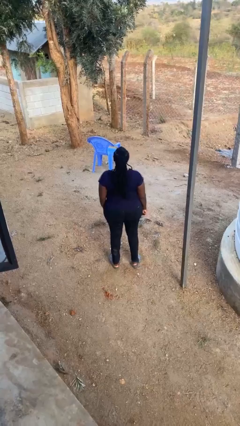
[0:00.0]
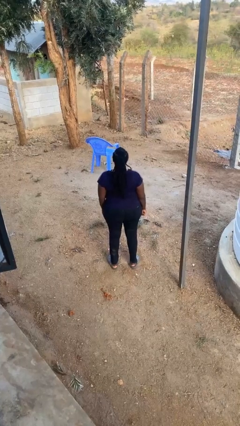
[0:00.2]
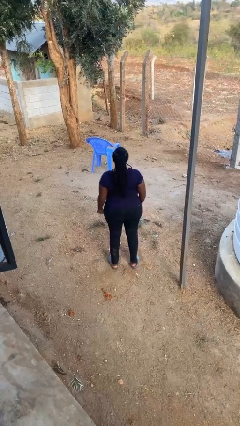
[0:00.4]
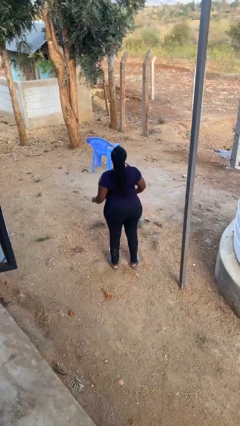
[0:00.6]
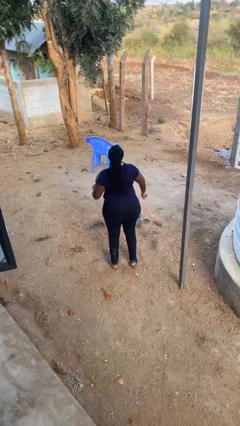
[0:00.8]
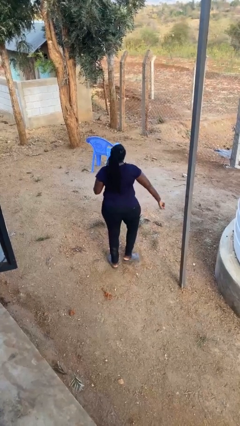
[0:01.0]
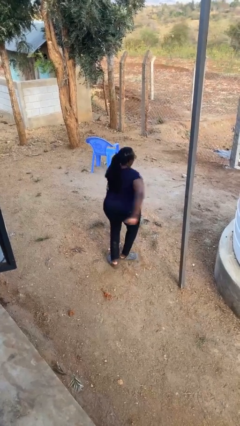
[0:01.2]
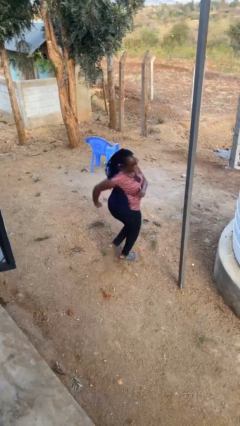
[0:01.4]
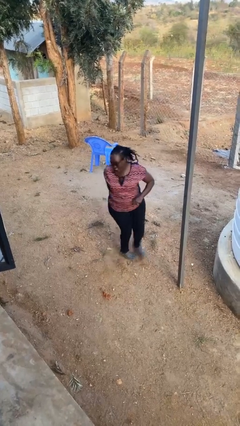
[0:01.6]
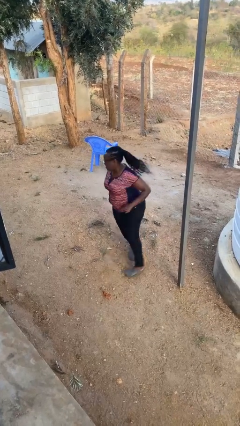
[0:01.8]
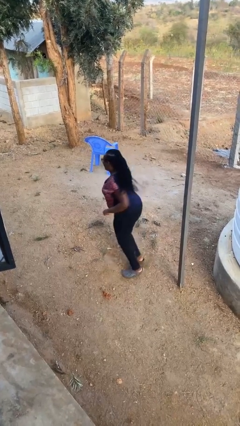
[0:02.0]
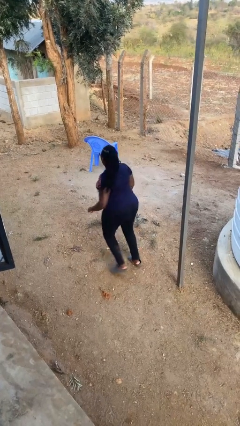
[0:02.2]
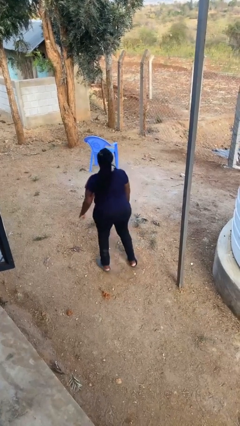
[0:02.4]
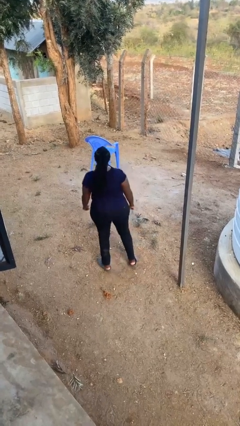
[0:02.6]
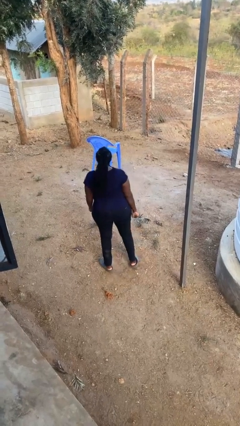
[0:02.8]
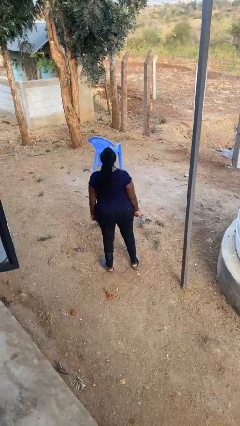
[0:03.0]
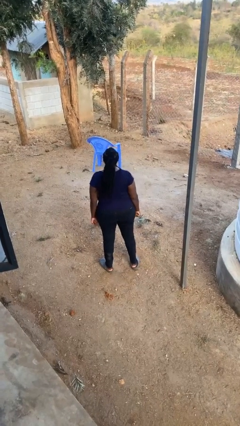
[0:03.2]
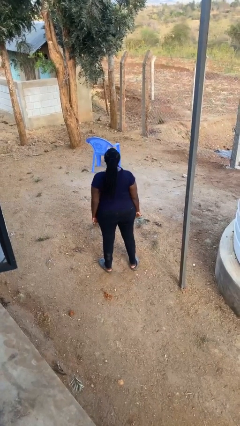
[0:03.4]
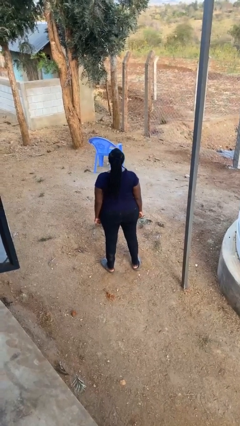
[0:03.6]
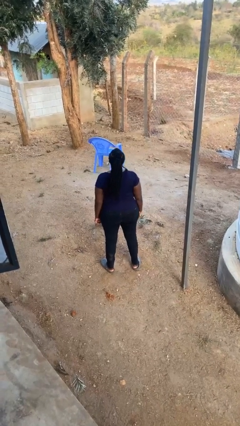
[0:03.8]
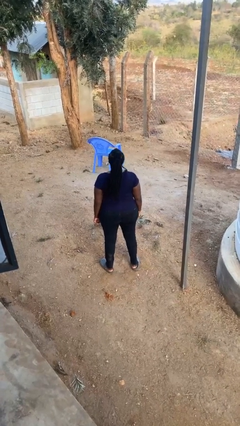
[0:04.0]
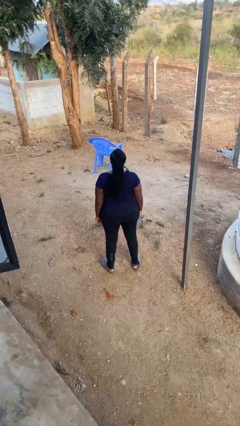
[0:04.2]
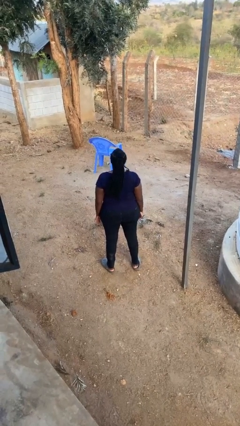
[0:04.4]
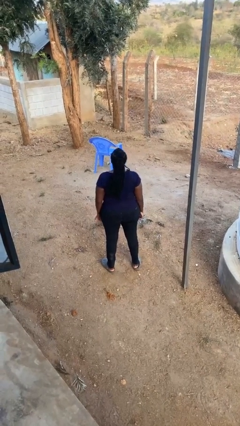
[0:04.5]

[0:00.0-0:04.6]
person twirls

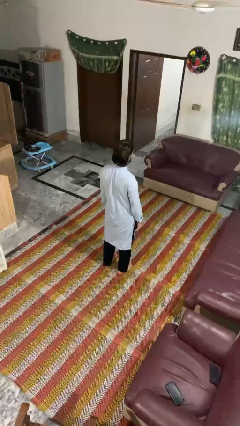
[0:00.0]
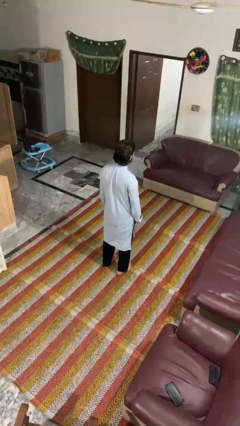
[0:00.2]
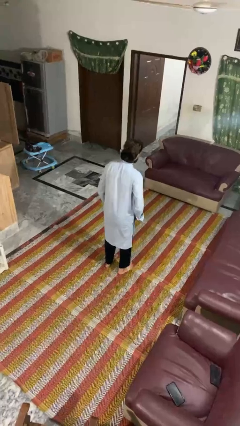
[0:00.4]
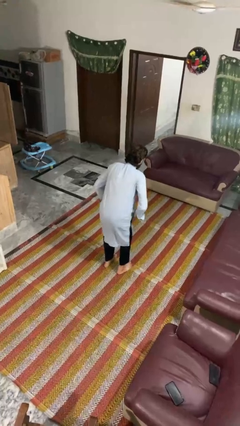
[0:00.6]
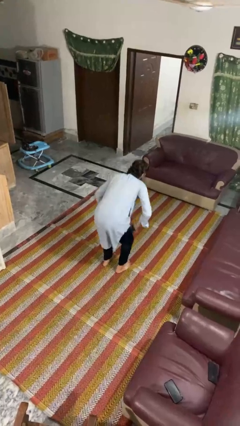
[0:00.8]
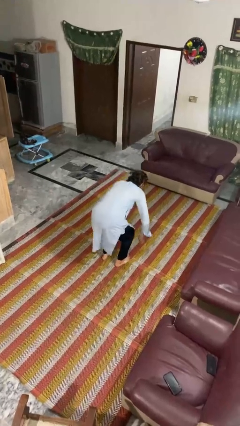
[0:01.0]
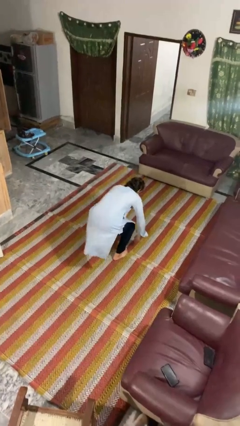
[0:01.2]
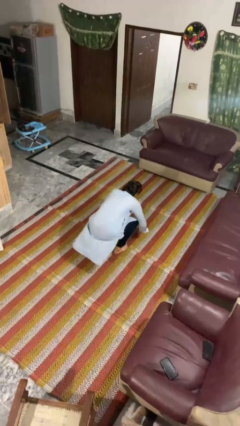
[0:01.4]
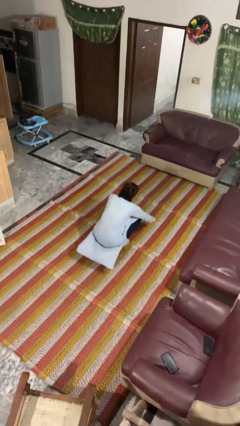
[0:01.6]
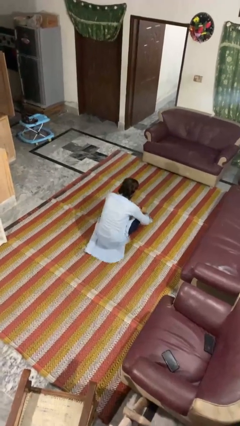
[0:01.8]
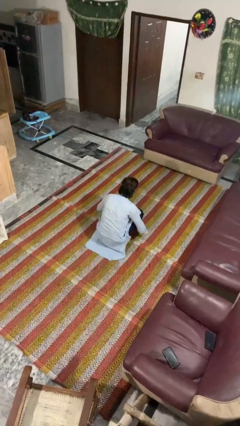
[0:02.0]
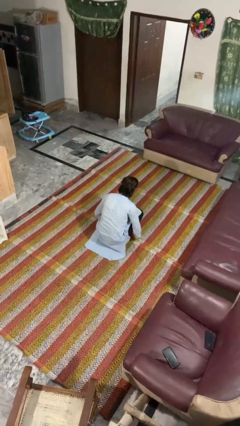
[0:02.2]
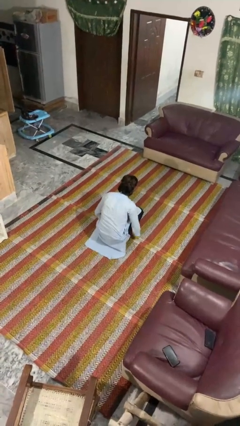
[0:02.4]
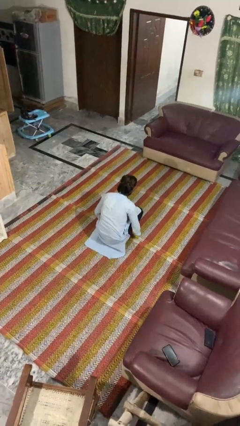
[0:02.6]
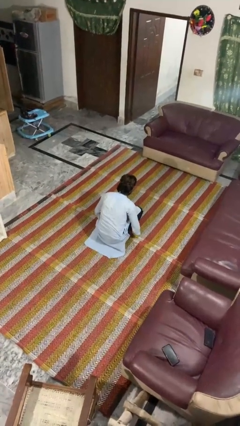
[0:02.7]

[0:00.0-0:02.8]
person squats

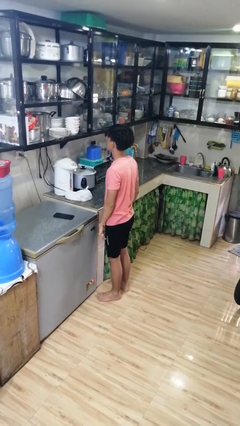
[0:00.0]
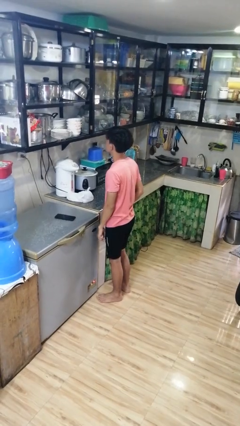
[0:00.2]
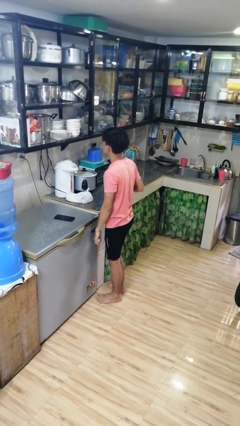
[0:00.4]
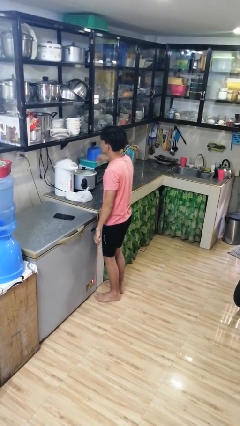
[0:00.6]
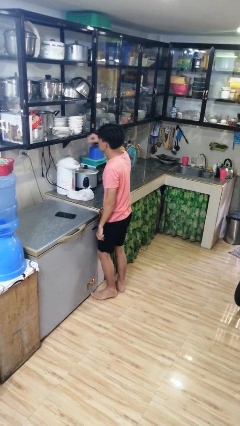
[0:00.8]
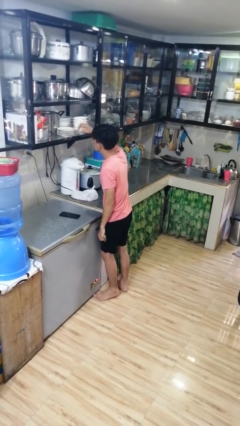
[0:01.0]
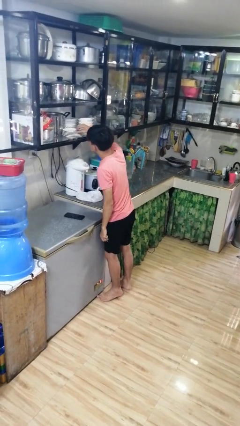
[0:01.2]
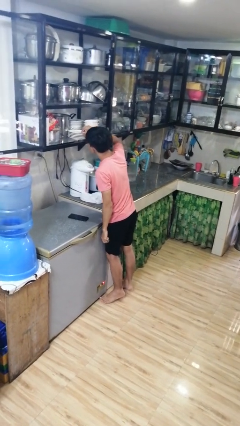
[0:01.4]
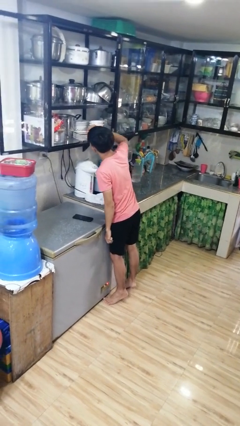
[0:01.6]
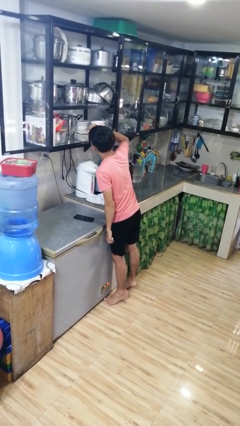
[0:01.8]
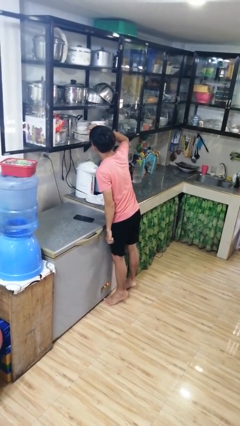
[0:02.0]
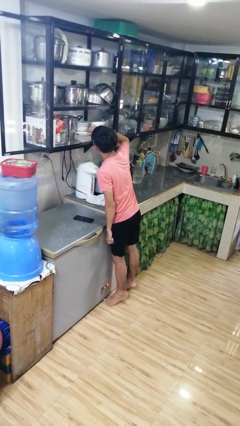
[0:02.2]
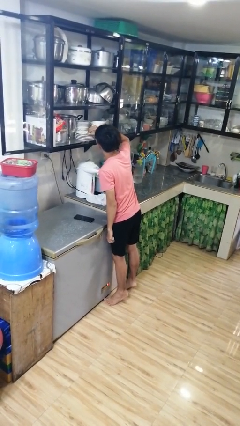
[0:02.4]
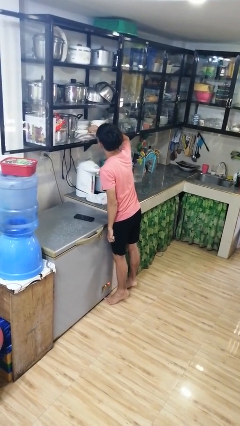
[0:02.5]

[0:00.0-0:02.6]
person takes off backpack

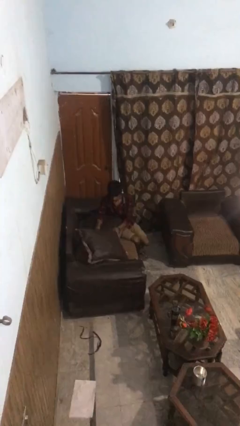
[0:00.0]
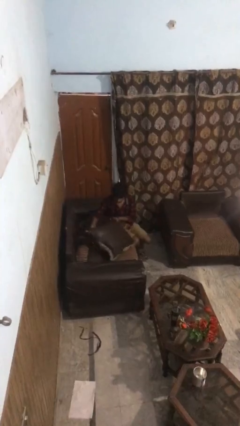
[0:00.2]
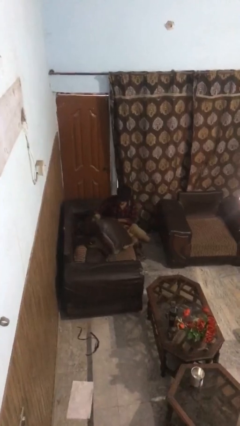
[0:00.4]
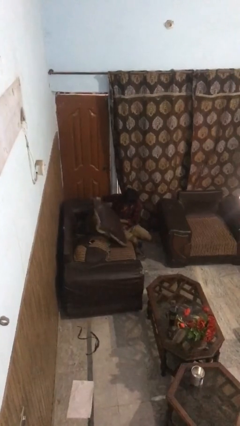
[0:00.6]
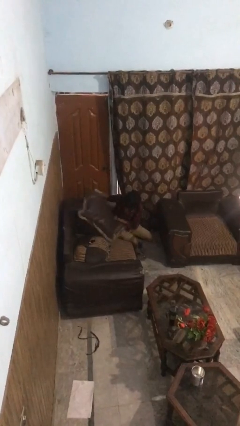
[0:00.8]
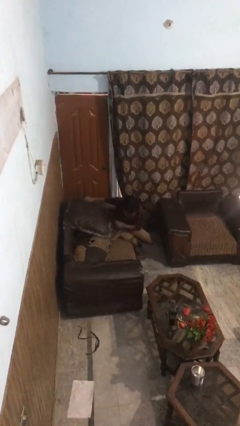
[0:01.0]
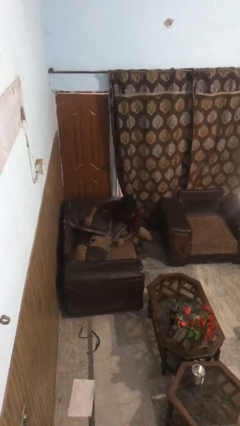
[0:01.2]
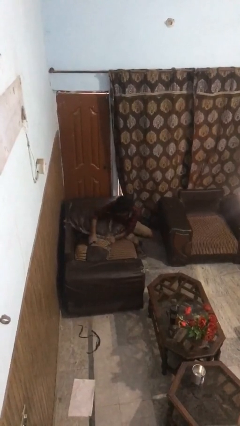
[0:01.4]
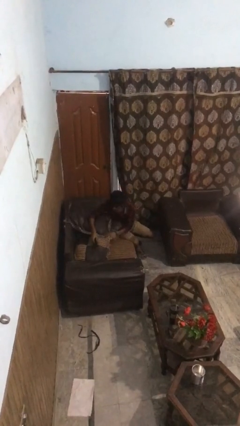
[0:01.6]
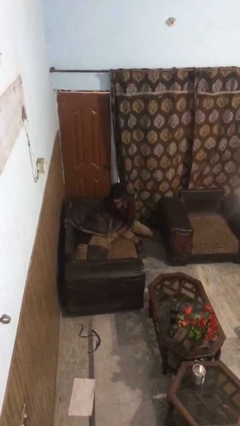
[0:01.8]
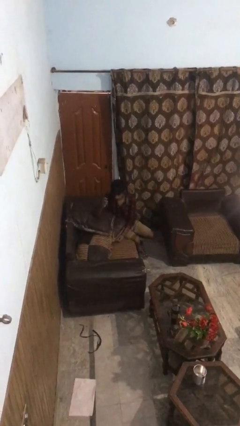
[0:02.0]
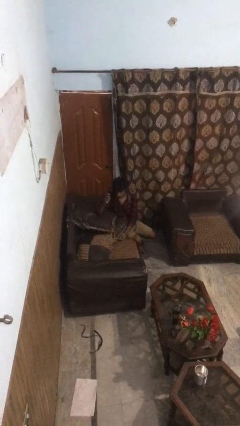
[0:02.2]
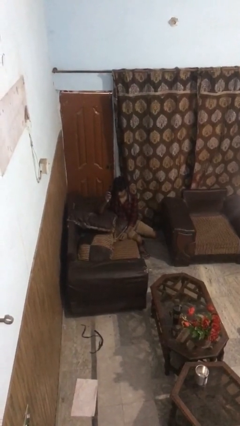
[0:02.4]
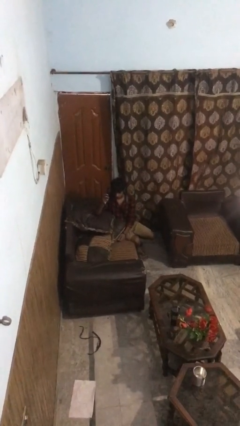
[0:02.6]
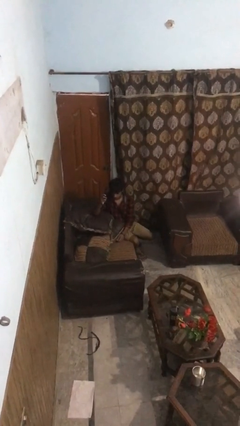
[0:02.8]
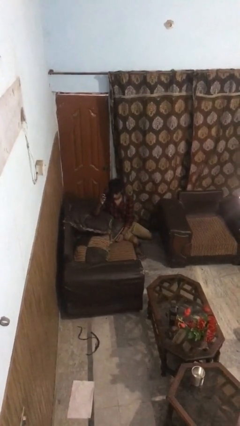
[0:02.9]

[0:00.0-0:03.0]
person searches in couch

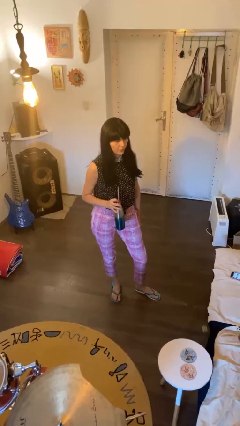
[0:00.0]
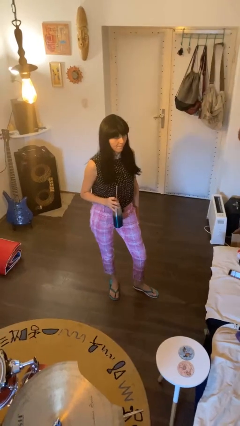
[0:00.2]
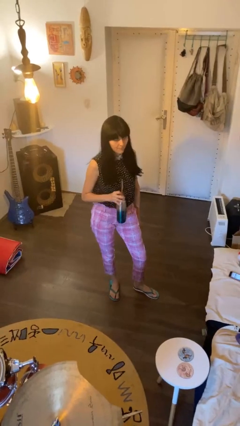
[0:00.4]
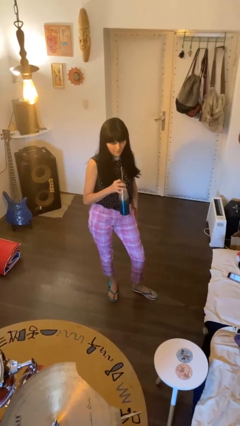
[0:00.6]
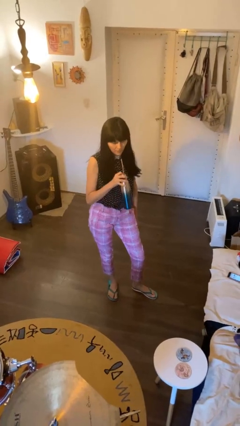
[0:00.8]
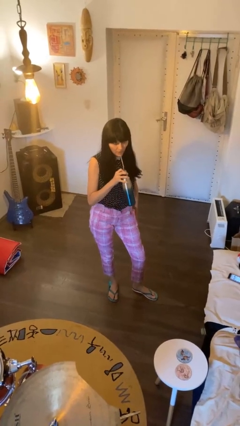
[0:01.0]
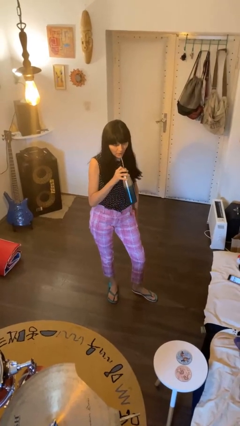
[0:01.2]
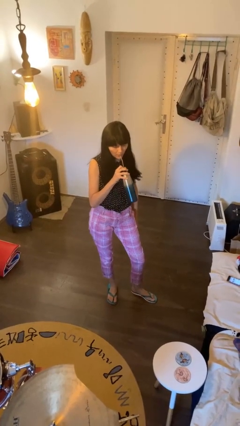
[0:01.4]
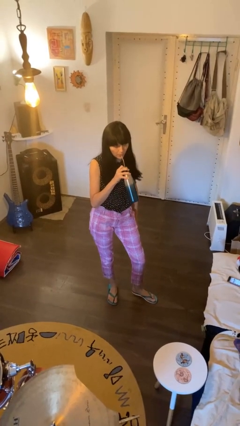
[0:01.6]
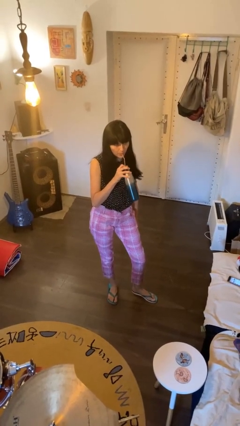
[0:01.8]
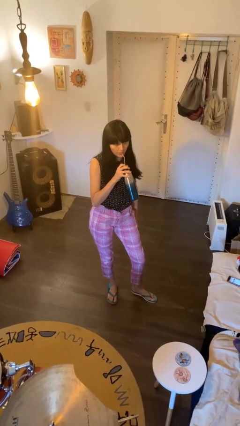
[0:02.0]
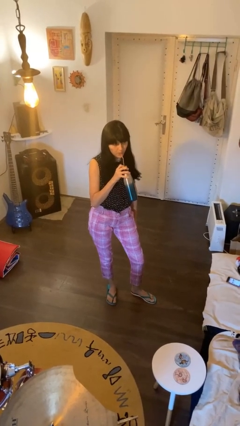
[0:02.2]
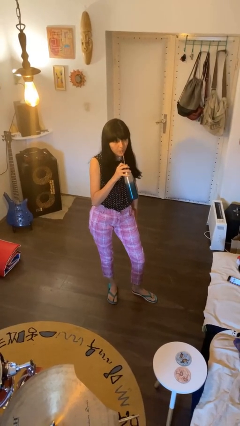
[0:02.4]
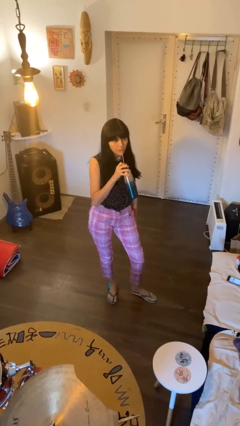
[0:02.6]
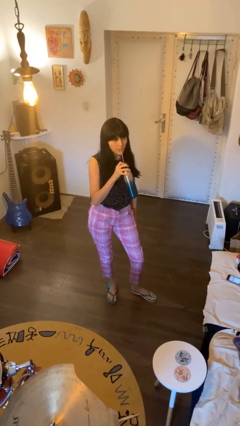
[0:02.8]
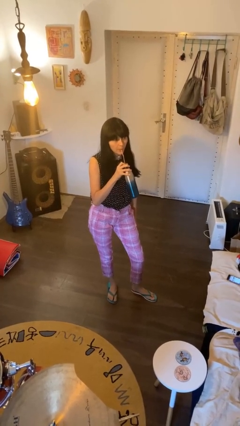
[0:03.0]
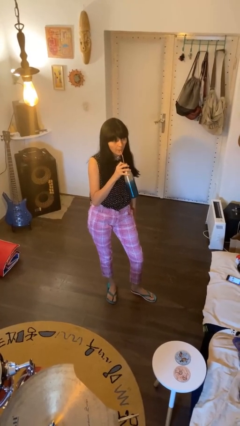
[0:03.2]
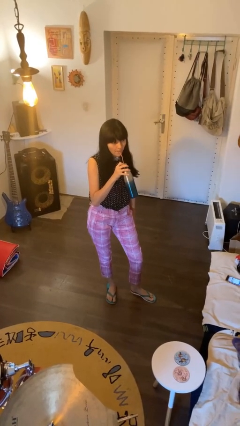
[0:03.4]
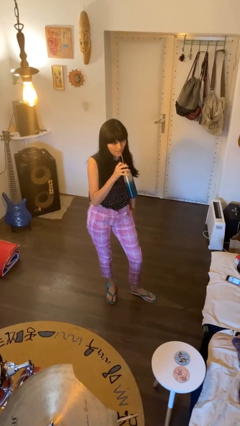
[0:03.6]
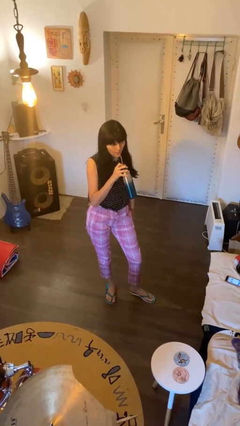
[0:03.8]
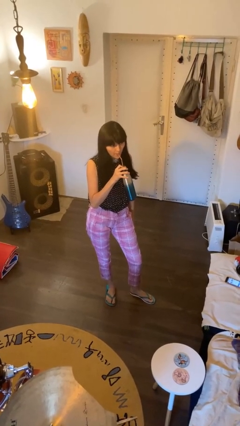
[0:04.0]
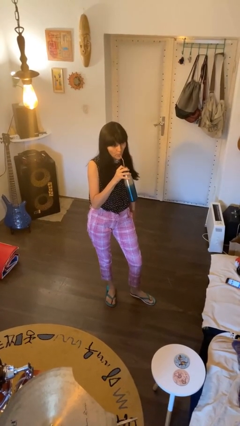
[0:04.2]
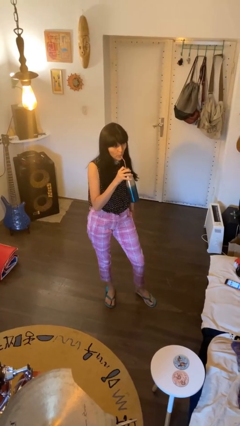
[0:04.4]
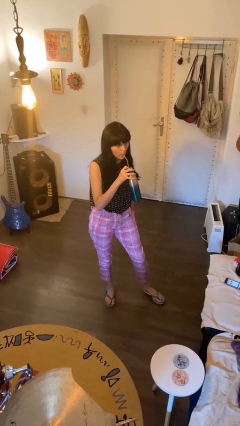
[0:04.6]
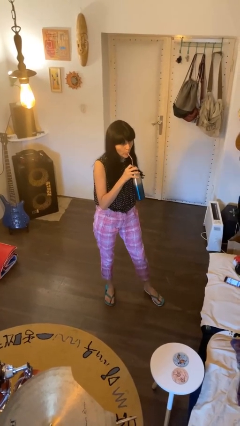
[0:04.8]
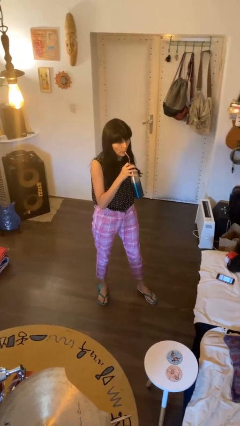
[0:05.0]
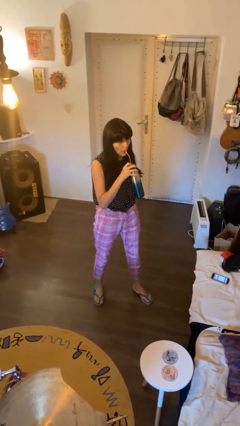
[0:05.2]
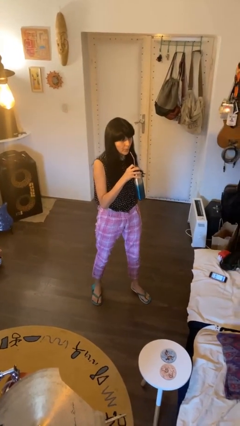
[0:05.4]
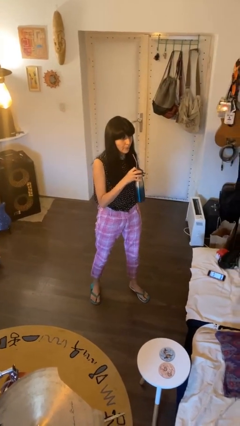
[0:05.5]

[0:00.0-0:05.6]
person drinks from straw
